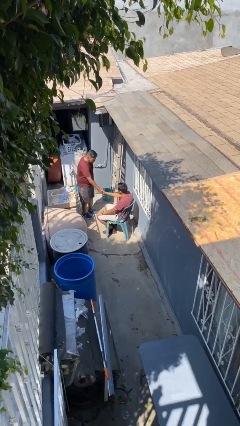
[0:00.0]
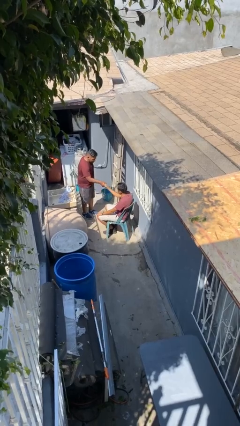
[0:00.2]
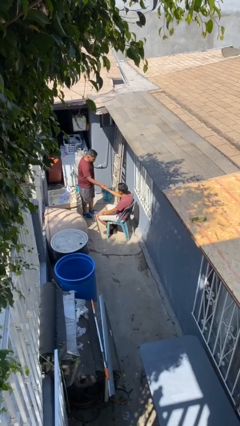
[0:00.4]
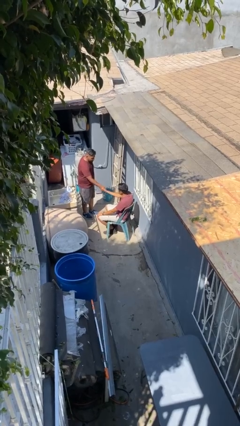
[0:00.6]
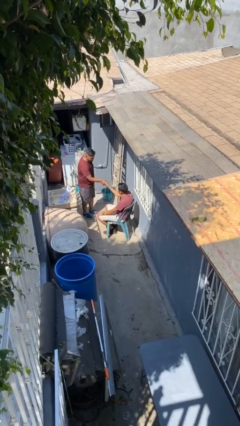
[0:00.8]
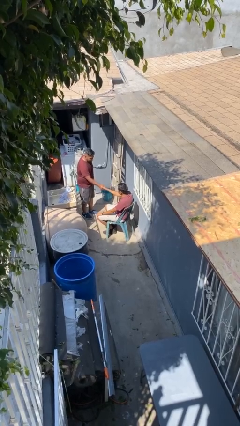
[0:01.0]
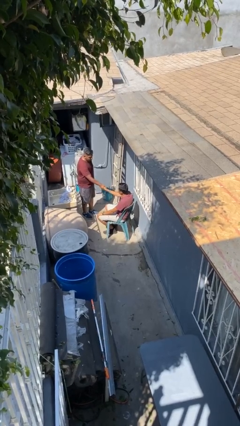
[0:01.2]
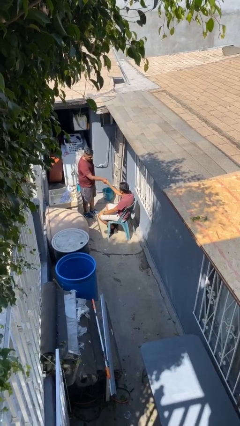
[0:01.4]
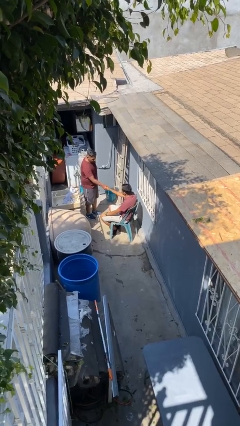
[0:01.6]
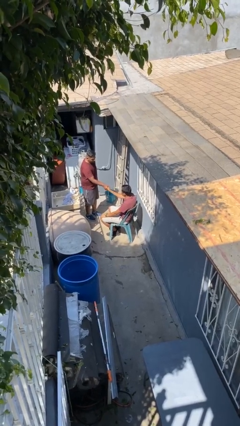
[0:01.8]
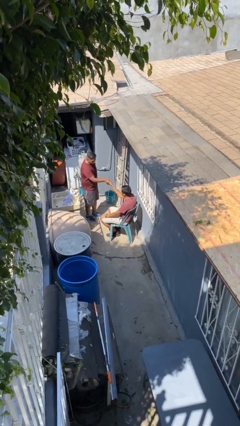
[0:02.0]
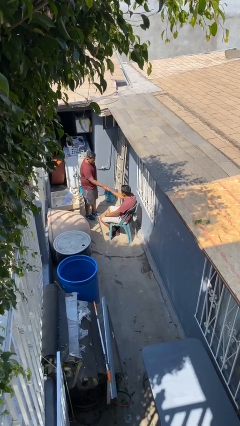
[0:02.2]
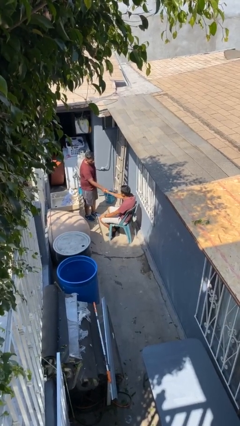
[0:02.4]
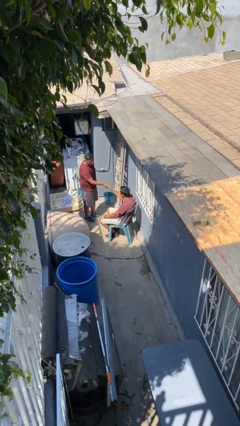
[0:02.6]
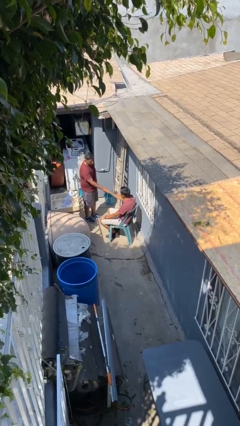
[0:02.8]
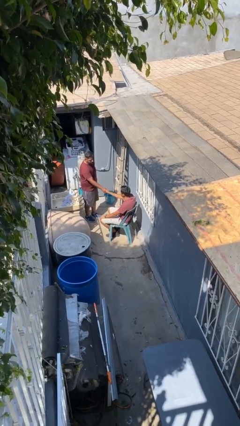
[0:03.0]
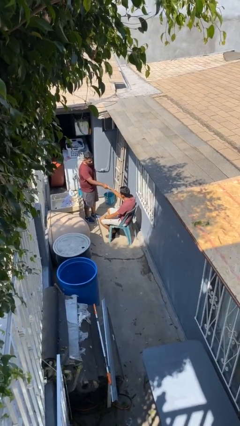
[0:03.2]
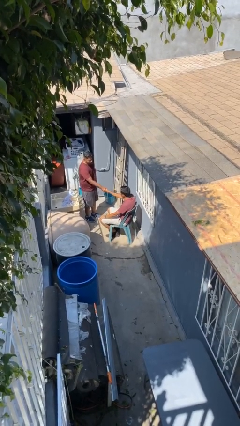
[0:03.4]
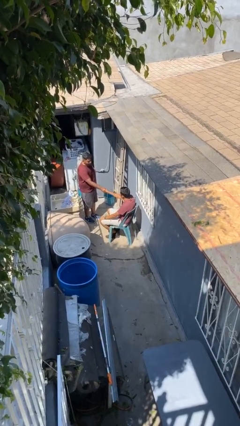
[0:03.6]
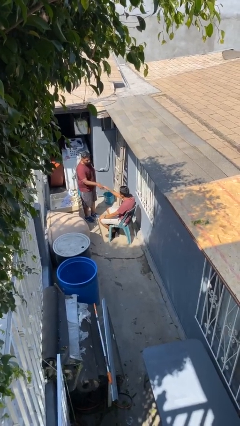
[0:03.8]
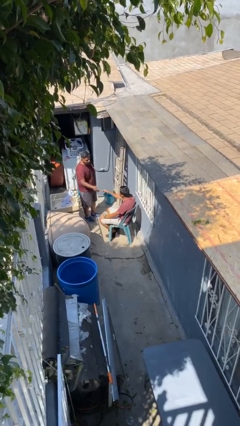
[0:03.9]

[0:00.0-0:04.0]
person shakes hand

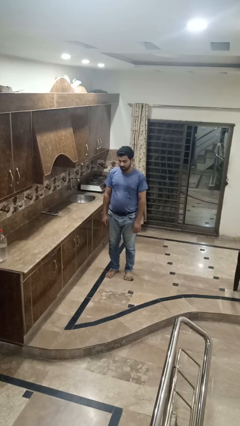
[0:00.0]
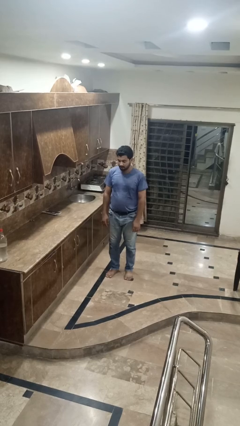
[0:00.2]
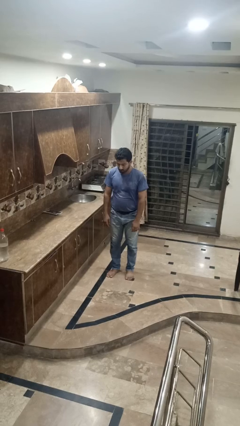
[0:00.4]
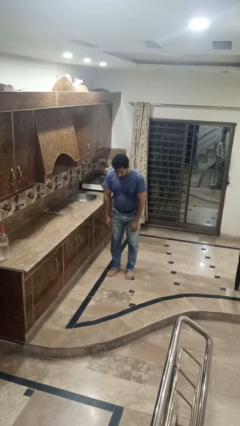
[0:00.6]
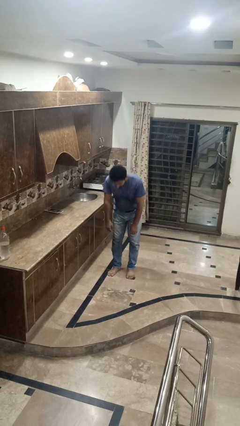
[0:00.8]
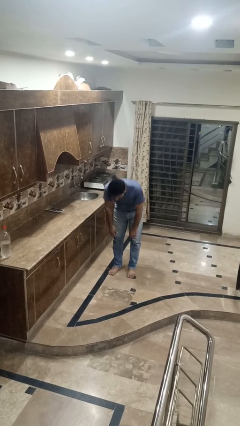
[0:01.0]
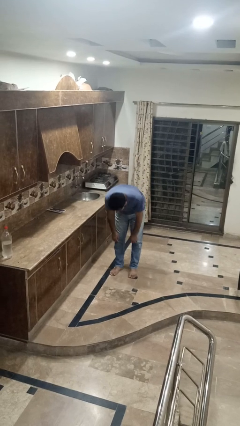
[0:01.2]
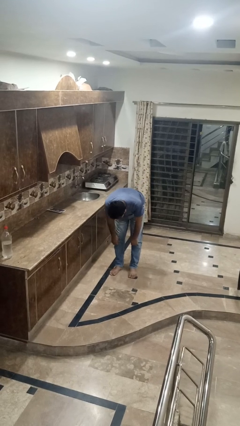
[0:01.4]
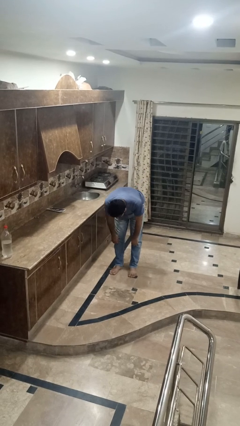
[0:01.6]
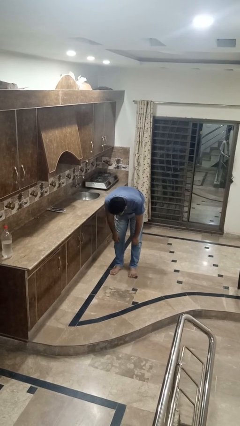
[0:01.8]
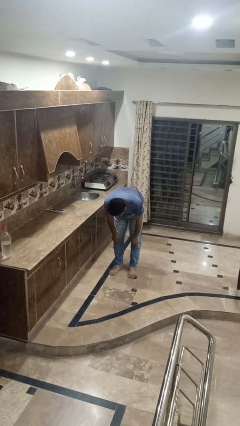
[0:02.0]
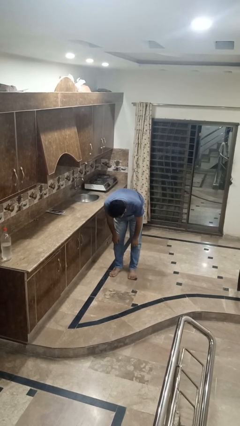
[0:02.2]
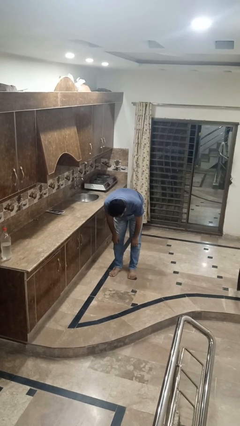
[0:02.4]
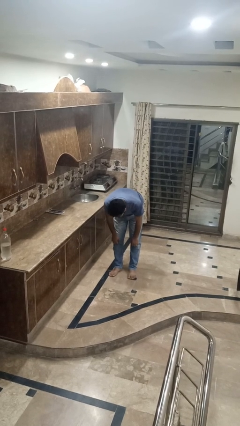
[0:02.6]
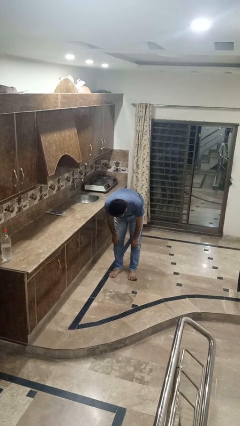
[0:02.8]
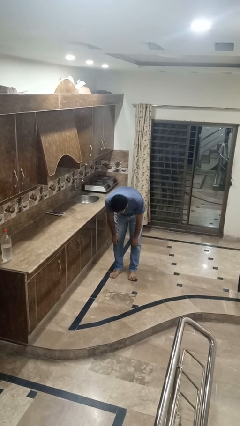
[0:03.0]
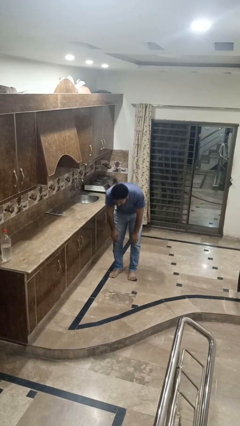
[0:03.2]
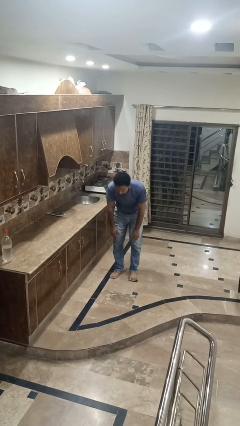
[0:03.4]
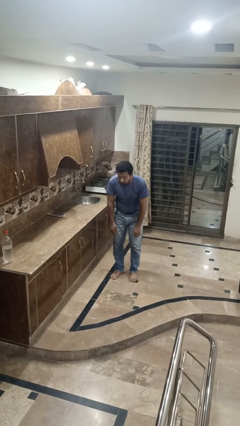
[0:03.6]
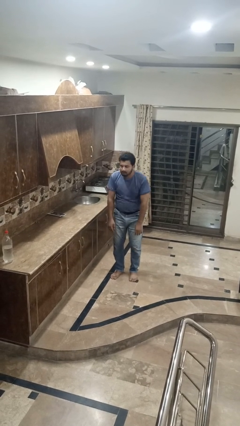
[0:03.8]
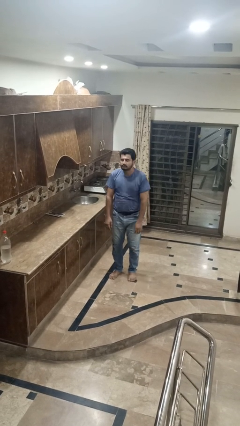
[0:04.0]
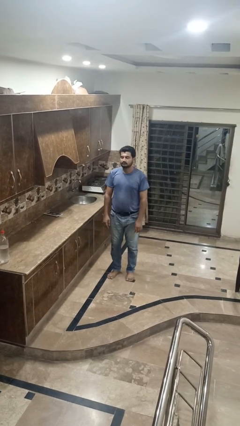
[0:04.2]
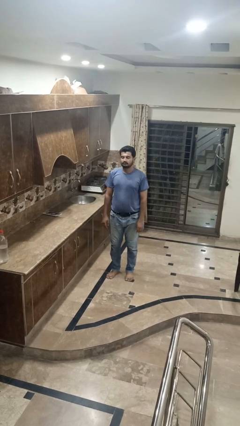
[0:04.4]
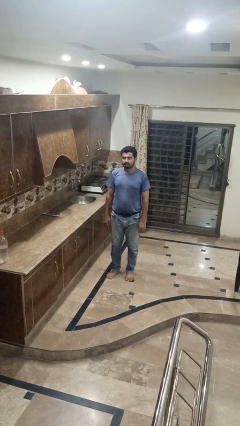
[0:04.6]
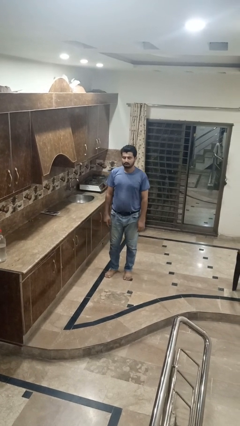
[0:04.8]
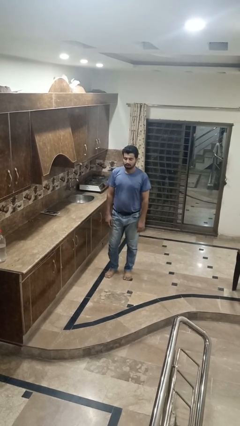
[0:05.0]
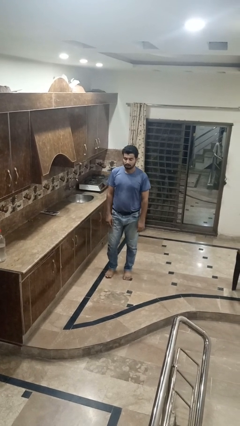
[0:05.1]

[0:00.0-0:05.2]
person bows

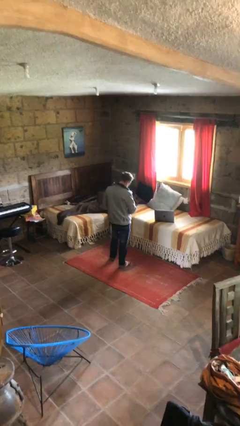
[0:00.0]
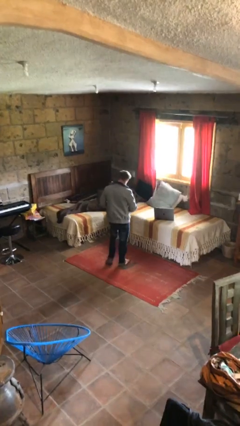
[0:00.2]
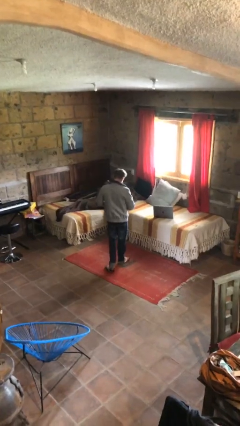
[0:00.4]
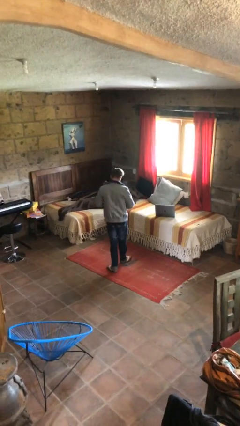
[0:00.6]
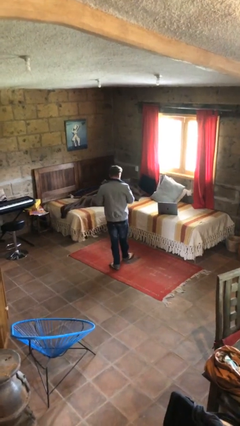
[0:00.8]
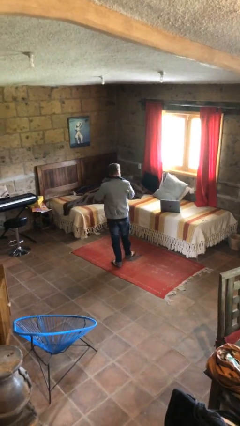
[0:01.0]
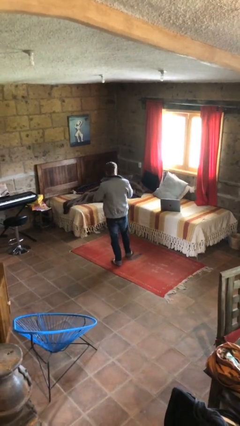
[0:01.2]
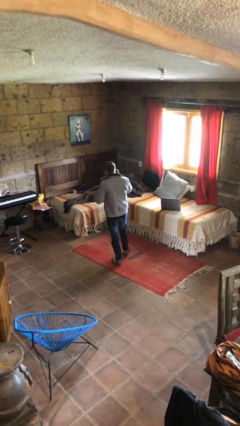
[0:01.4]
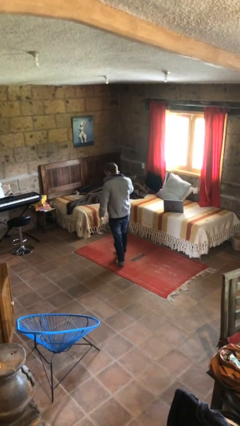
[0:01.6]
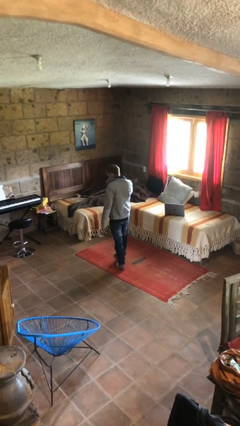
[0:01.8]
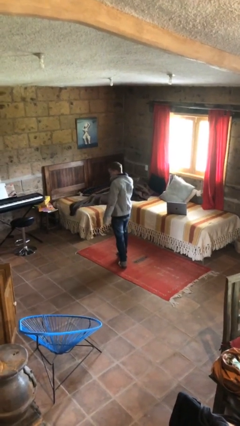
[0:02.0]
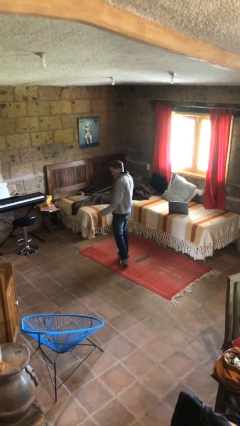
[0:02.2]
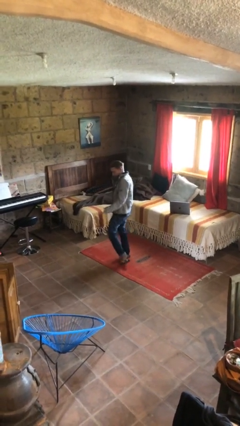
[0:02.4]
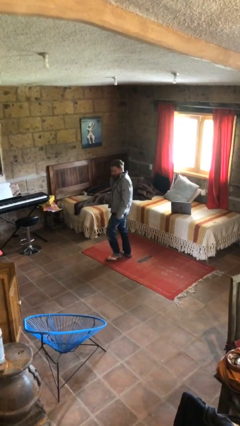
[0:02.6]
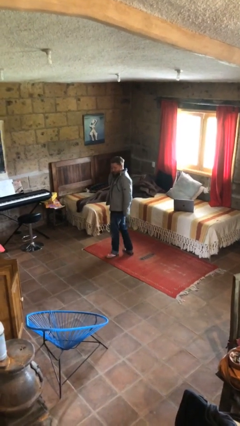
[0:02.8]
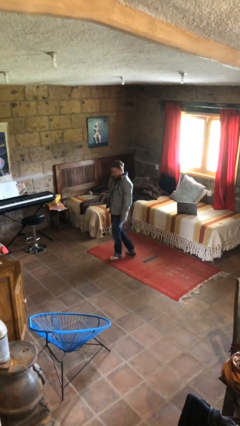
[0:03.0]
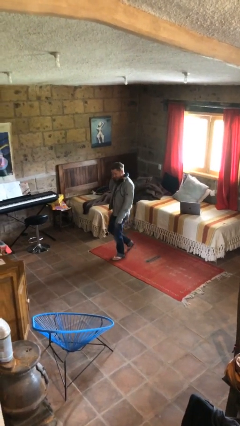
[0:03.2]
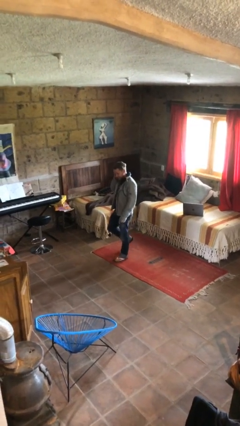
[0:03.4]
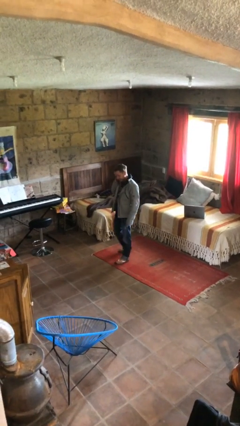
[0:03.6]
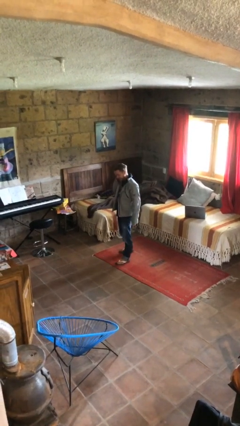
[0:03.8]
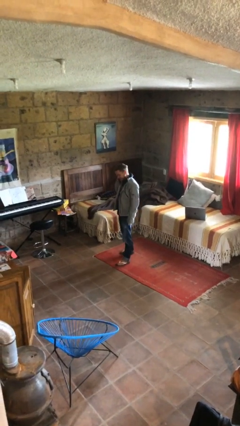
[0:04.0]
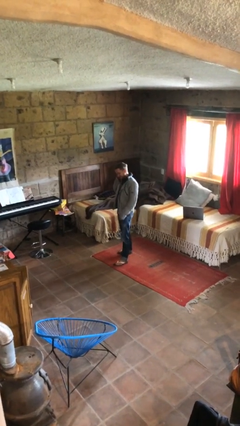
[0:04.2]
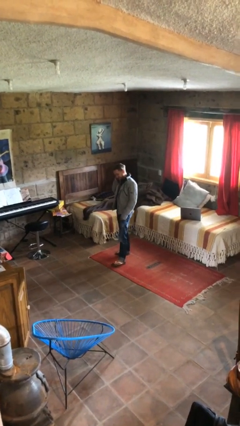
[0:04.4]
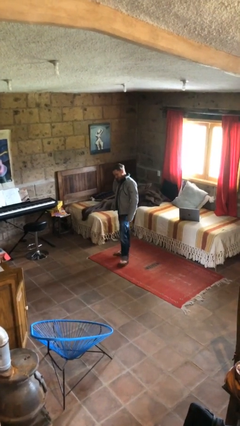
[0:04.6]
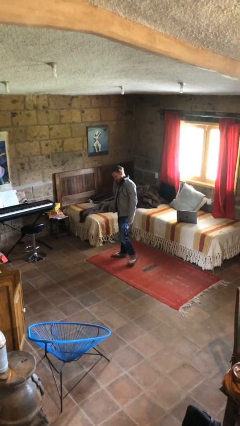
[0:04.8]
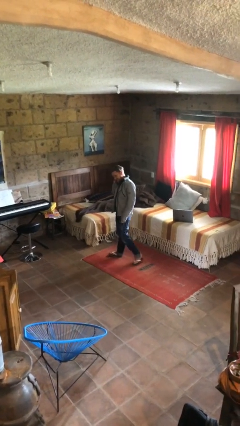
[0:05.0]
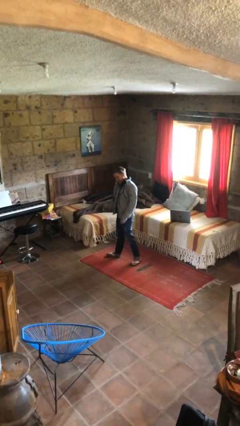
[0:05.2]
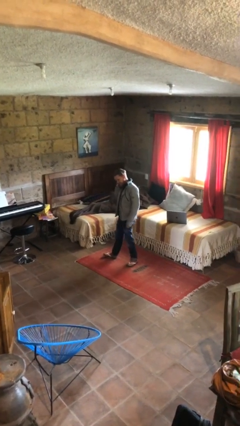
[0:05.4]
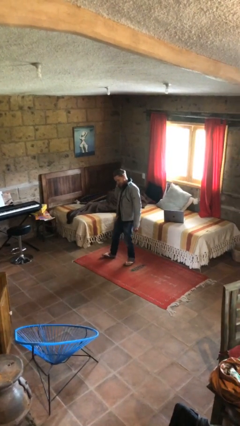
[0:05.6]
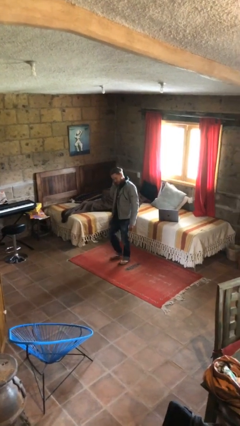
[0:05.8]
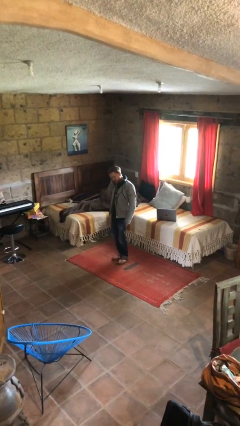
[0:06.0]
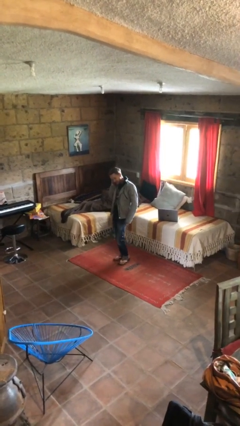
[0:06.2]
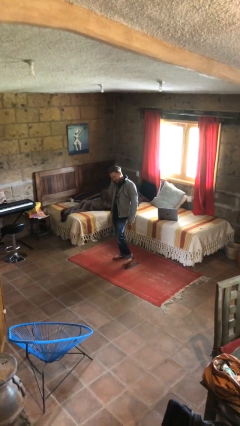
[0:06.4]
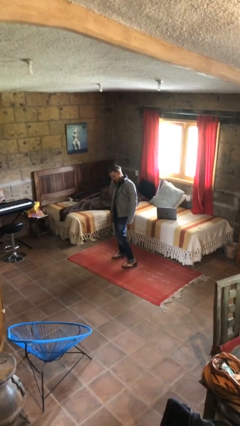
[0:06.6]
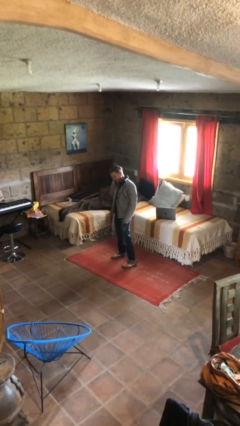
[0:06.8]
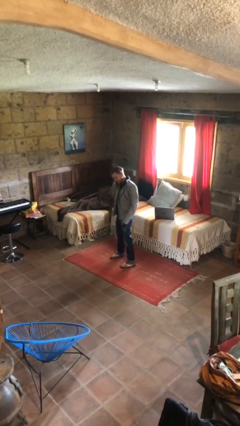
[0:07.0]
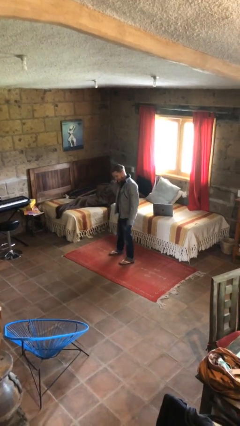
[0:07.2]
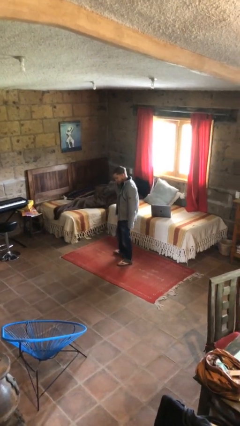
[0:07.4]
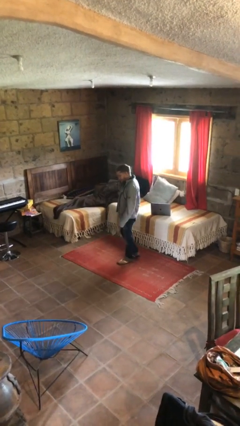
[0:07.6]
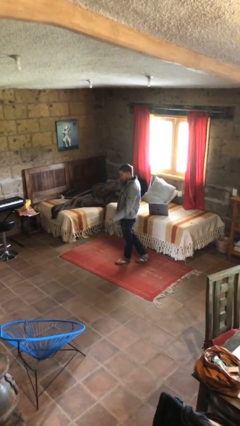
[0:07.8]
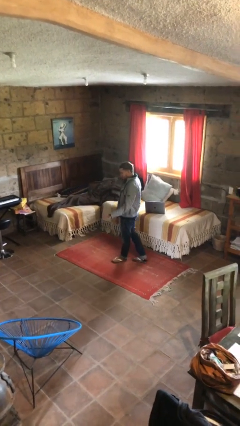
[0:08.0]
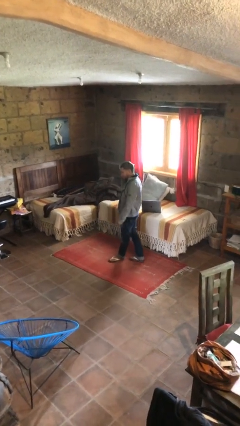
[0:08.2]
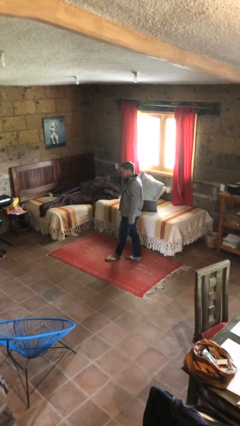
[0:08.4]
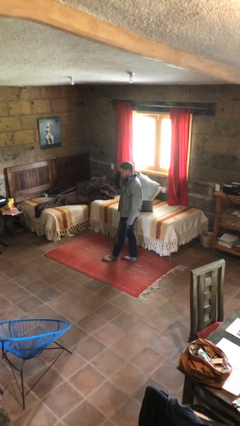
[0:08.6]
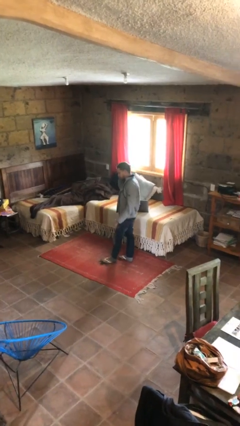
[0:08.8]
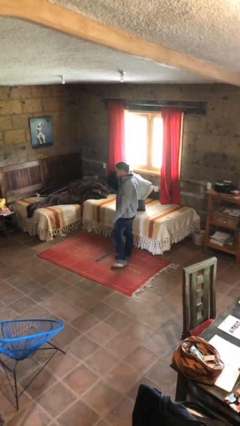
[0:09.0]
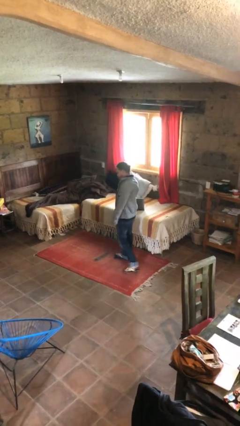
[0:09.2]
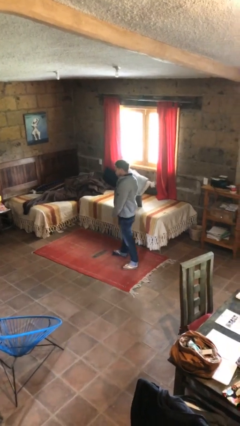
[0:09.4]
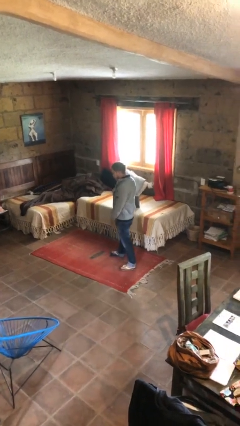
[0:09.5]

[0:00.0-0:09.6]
person talks on phone
